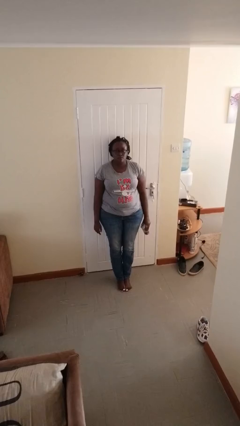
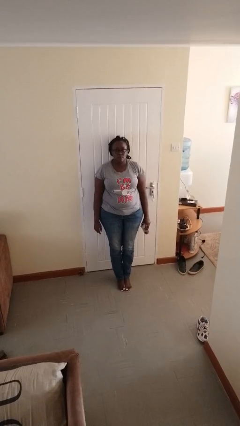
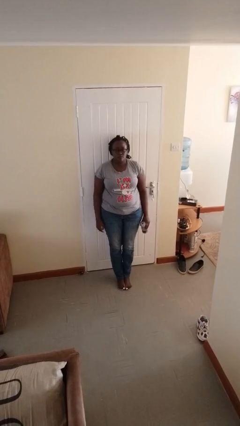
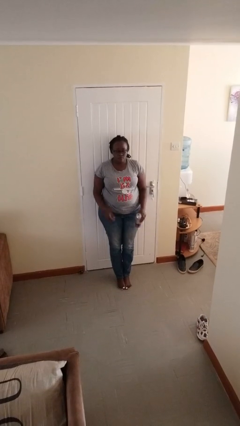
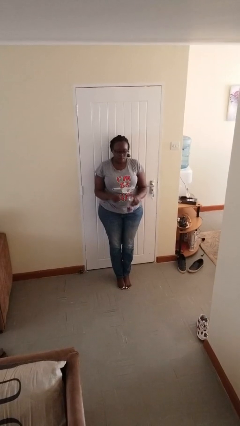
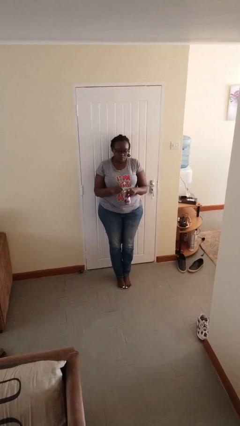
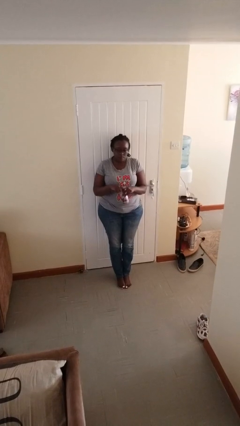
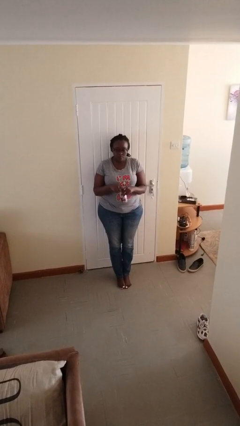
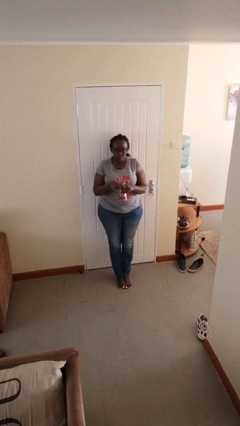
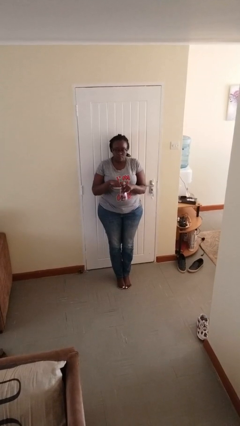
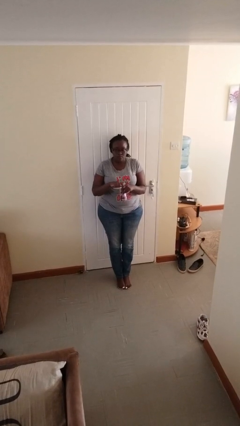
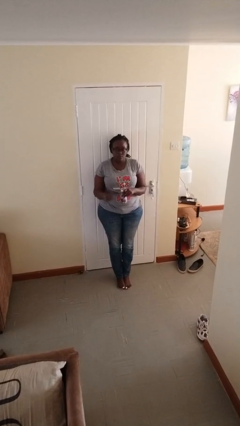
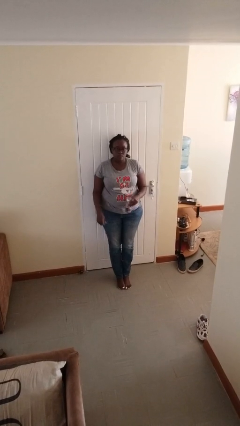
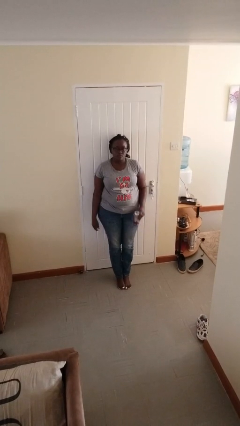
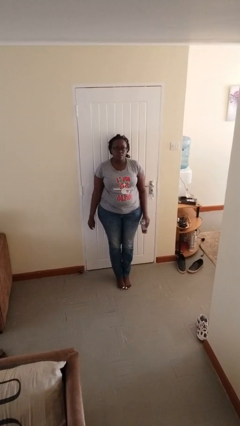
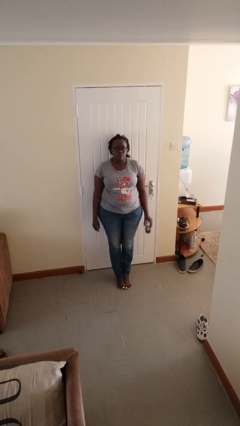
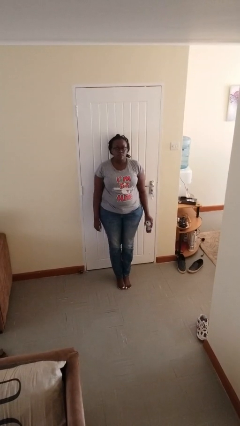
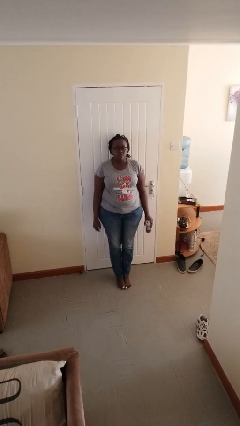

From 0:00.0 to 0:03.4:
person opens beverage can

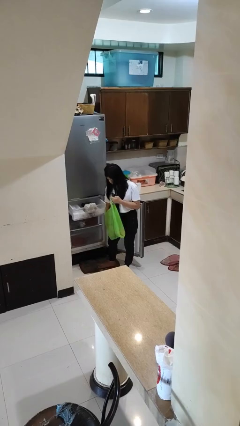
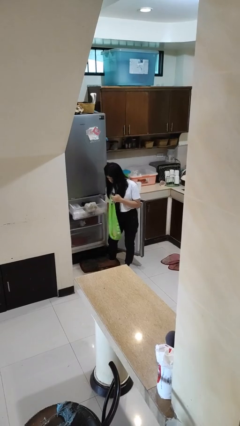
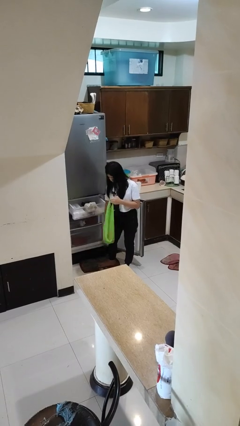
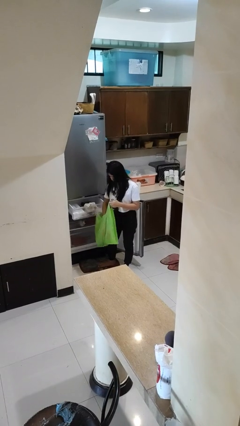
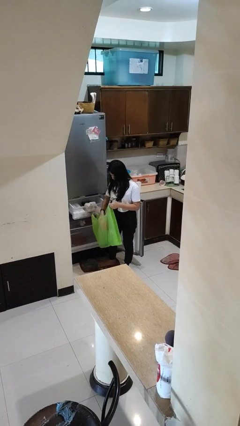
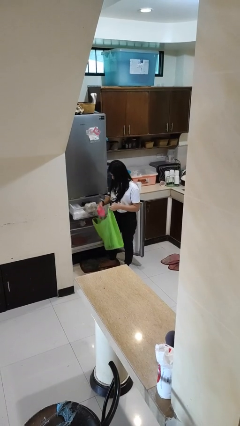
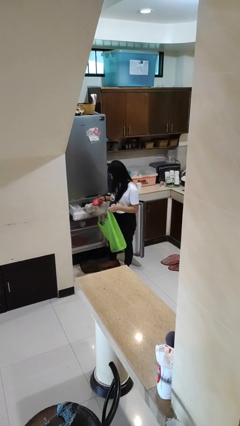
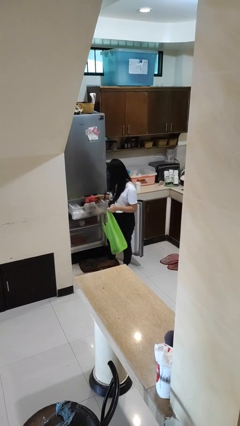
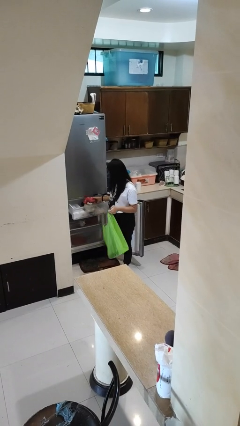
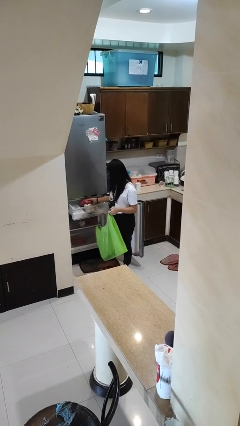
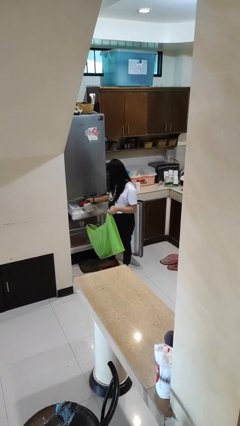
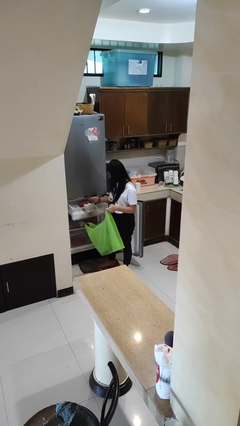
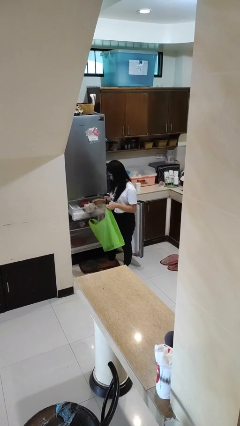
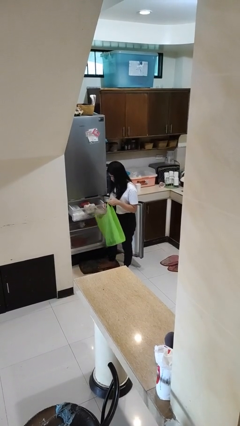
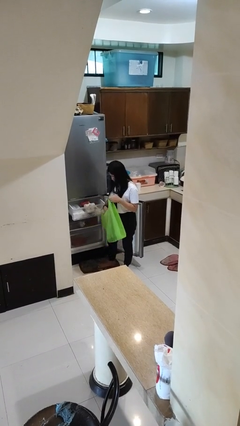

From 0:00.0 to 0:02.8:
person loads groceries into refrigerator

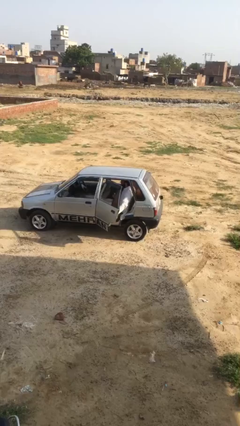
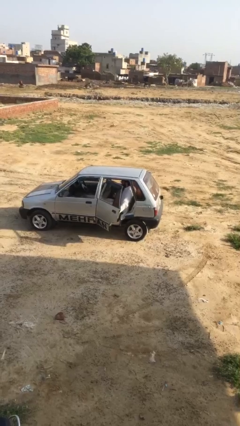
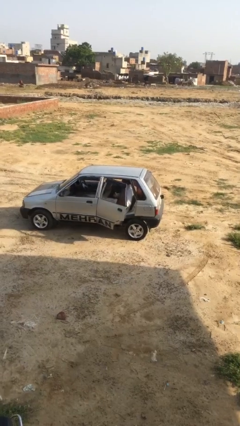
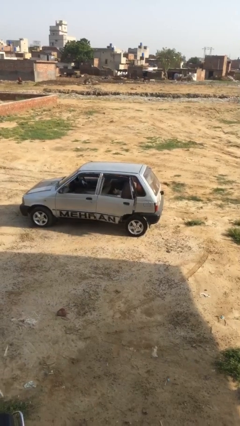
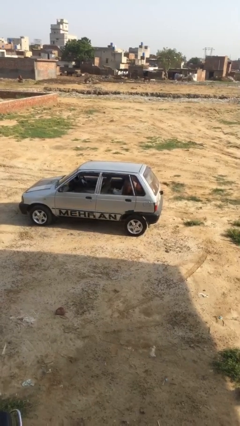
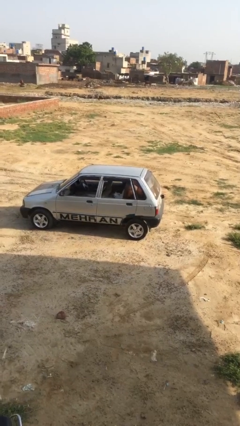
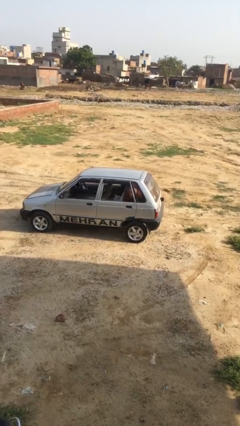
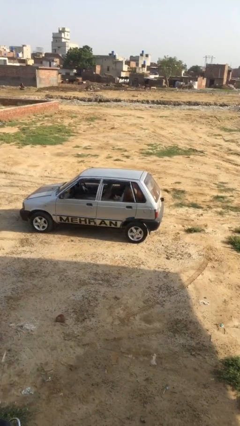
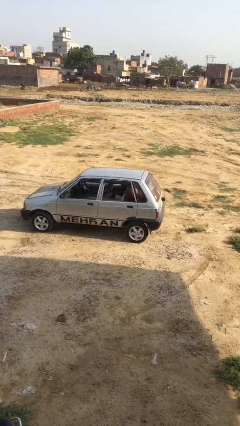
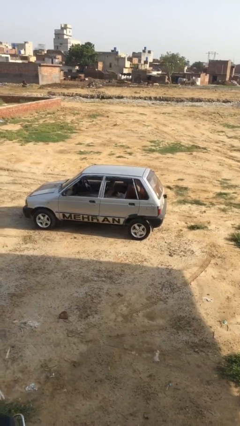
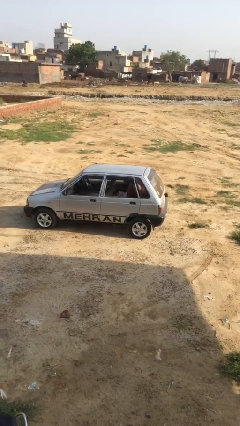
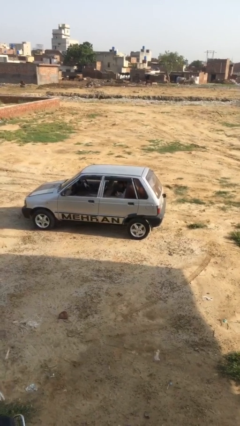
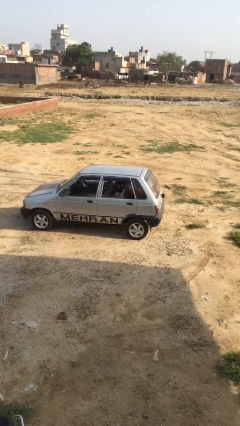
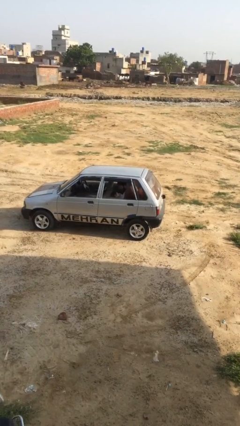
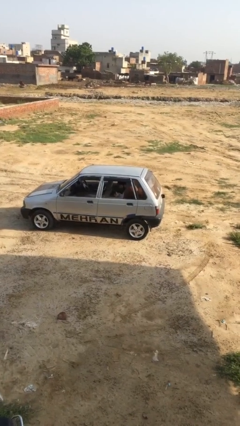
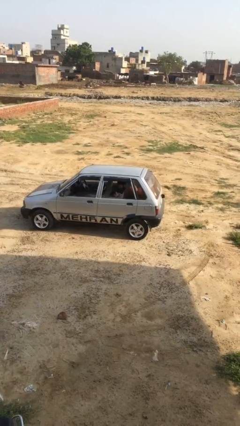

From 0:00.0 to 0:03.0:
person closes car door

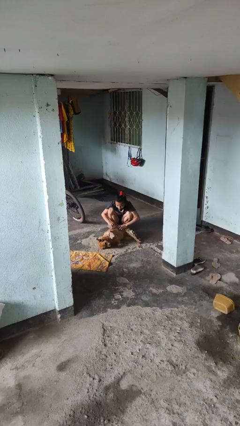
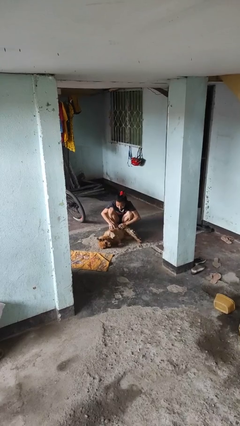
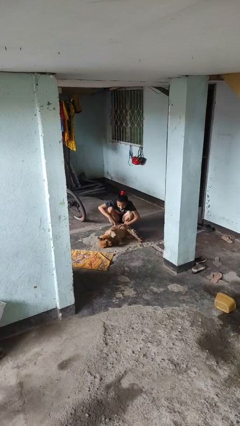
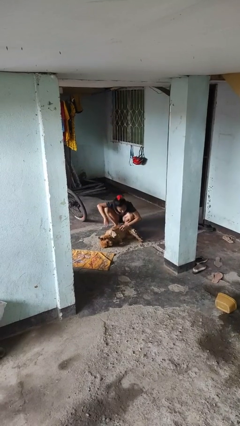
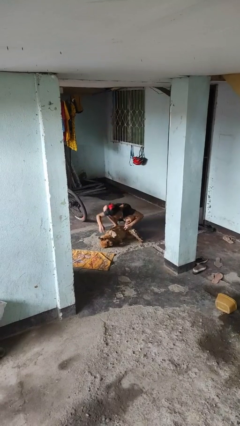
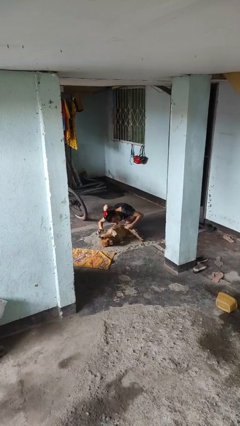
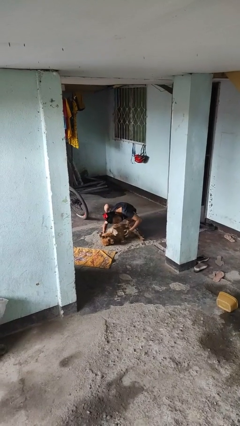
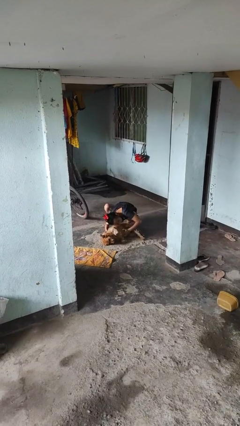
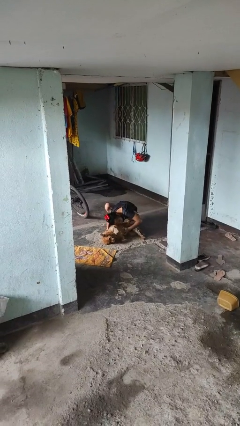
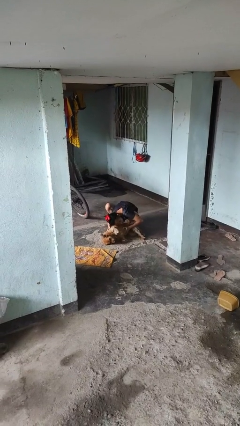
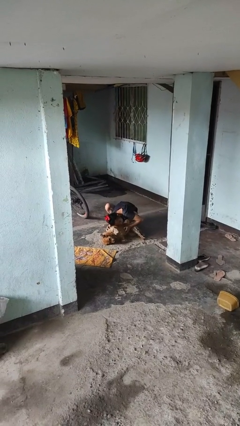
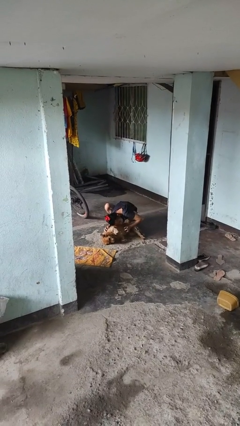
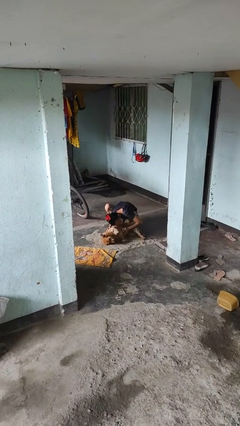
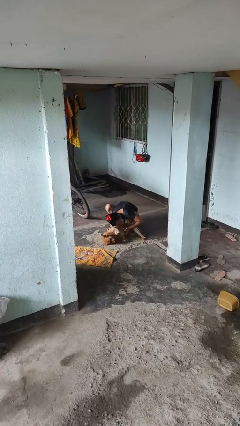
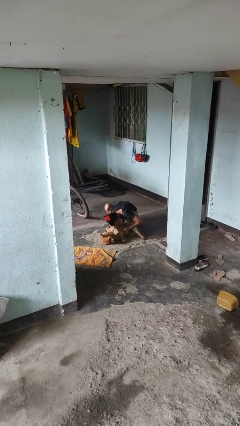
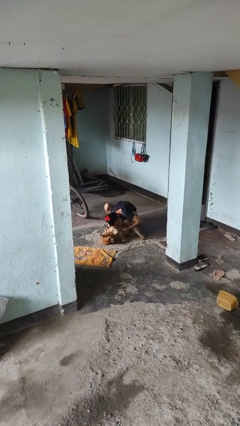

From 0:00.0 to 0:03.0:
person hugs dog

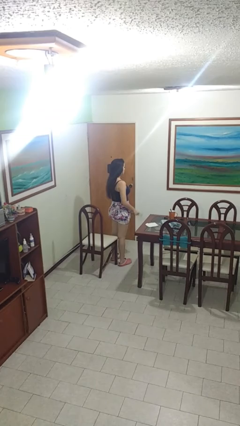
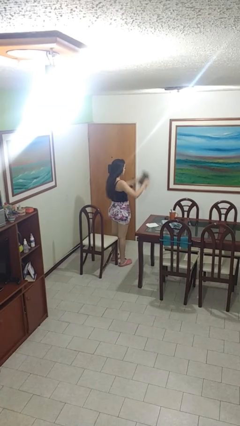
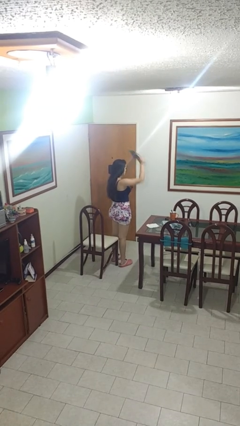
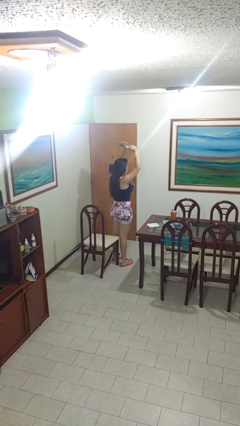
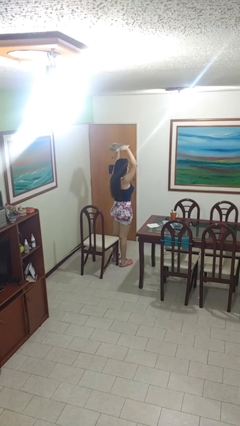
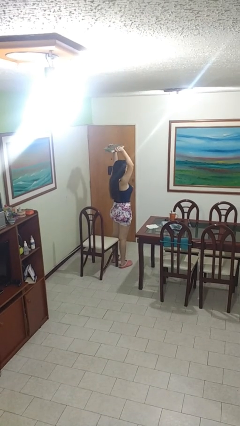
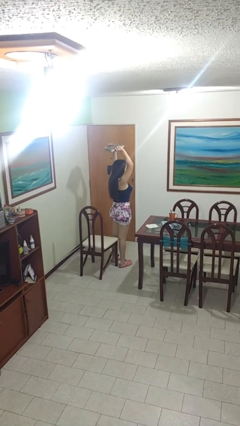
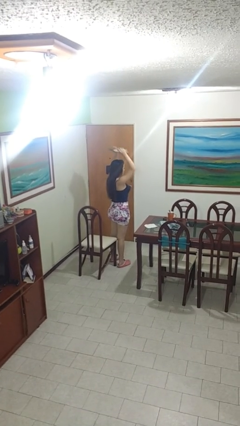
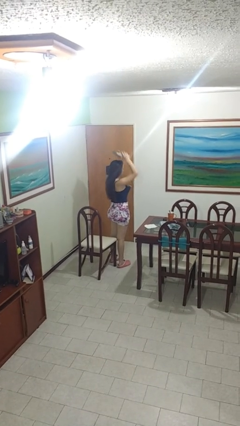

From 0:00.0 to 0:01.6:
person holds object above head

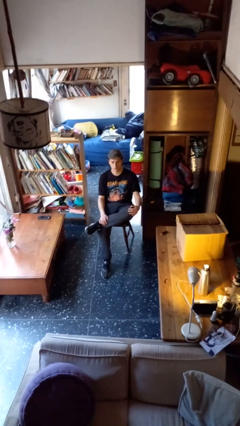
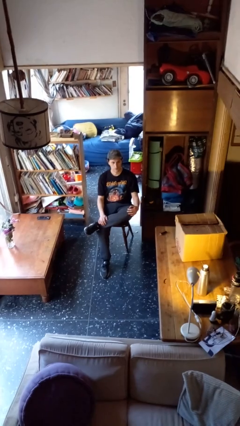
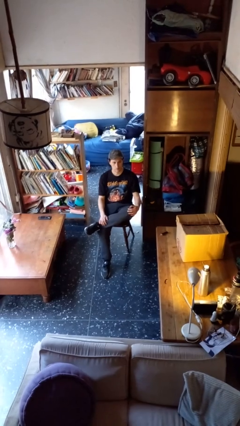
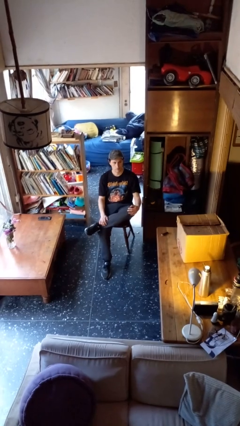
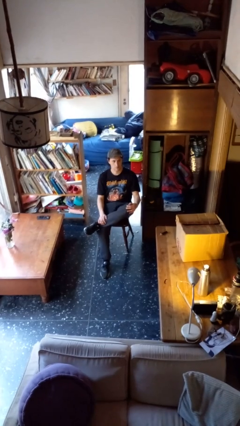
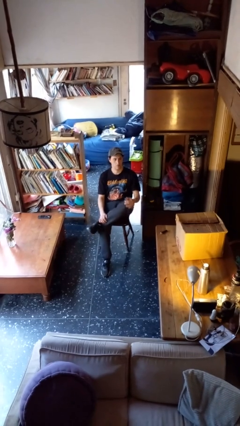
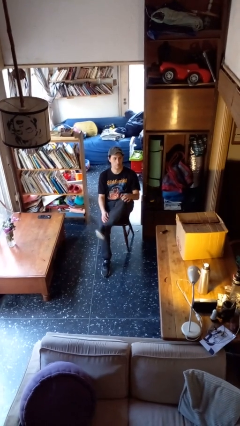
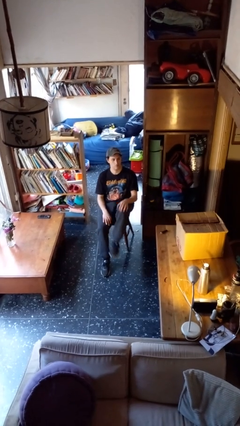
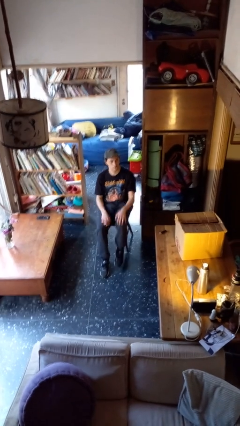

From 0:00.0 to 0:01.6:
person crosses legs

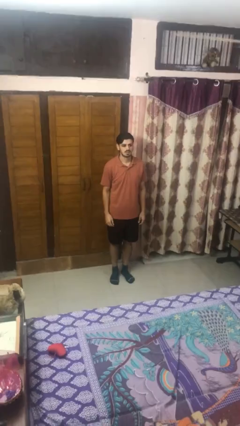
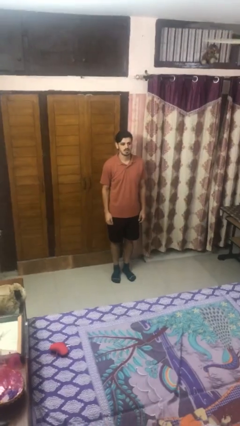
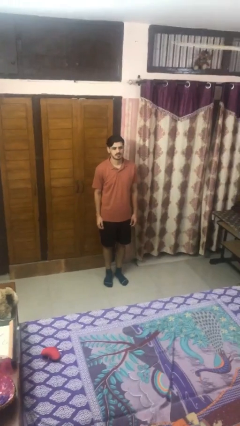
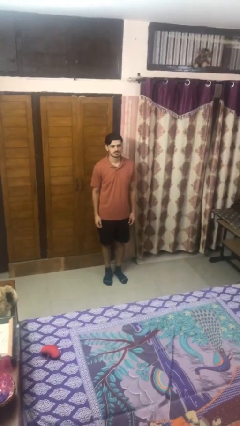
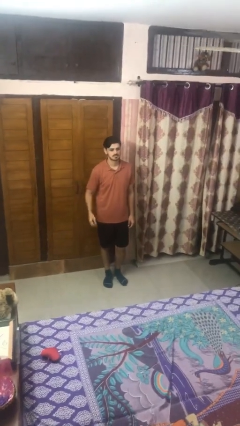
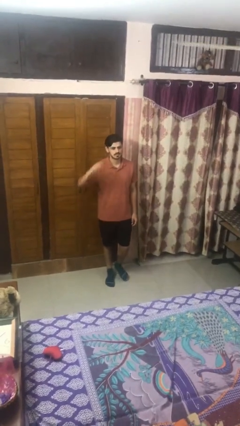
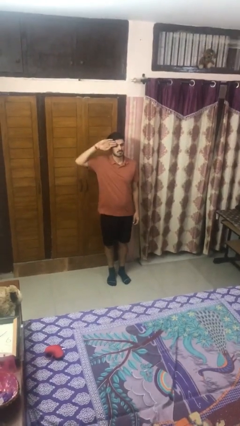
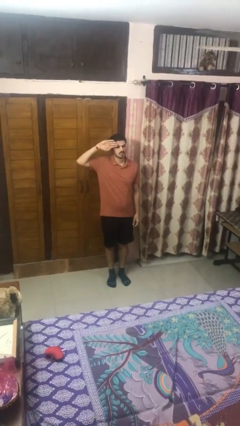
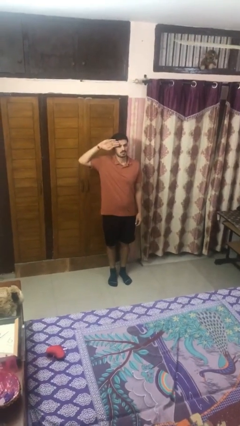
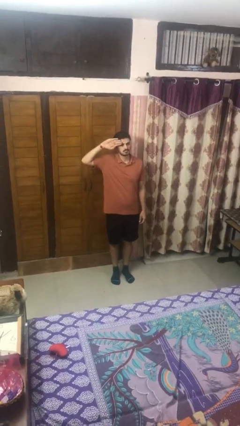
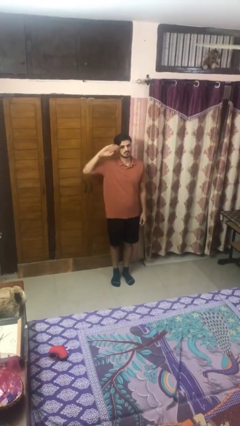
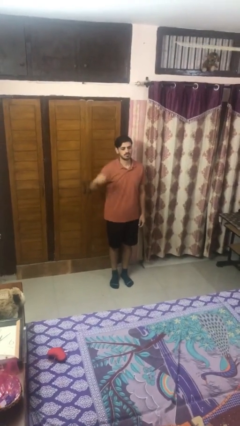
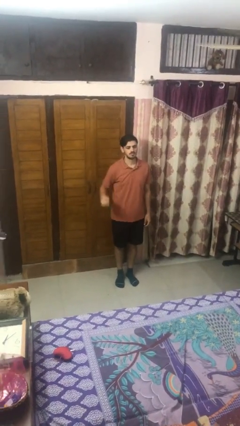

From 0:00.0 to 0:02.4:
person salutes
